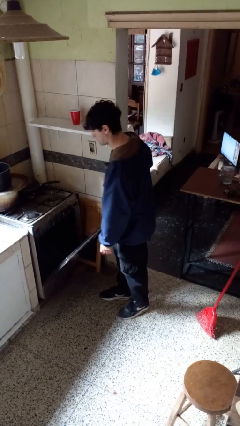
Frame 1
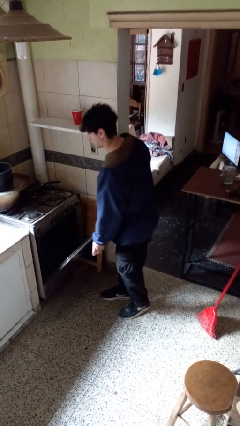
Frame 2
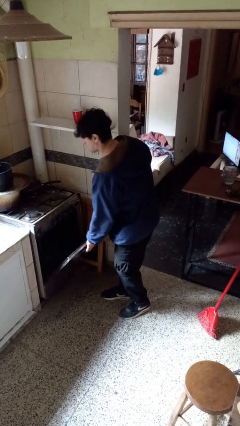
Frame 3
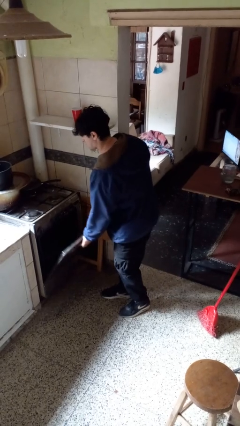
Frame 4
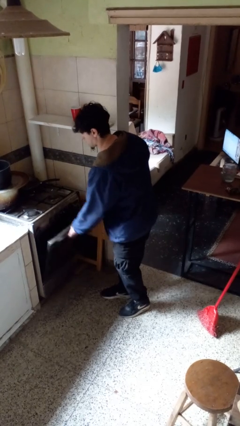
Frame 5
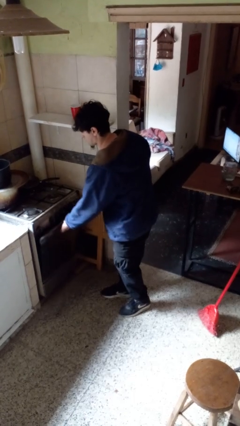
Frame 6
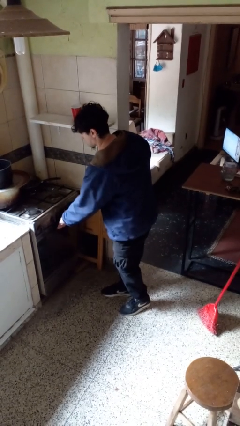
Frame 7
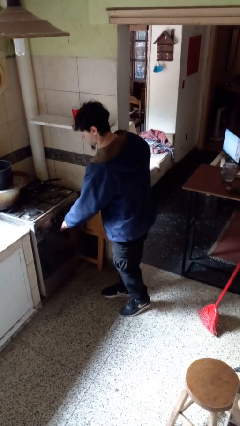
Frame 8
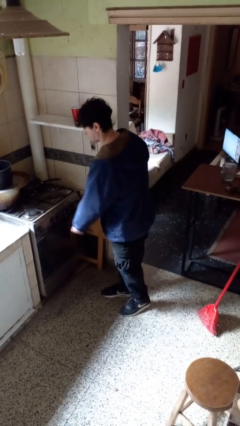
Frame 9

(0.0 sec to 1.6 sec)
person closes oven door

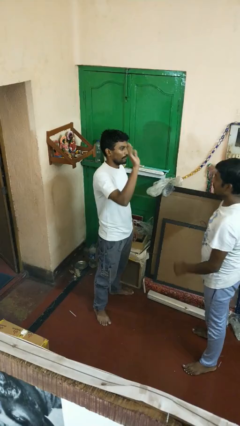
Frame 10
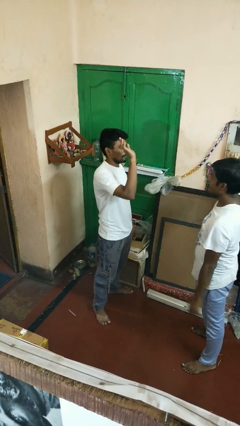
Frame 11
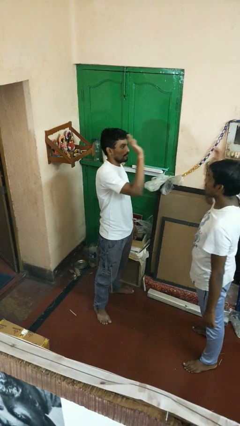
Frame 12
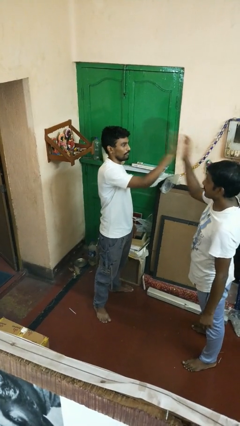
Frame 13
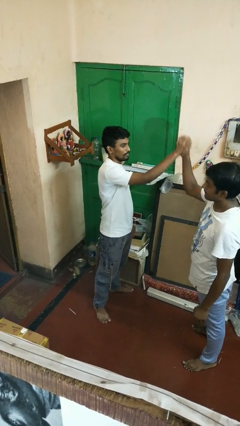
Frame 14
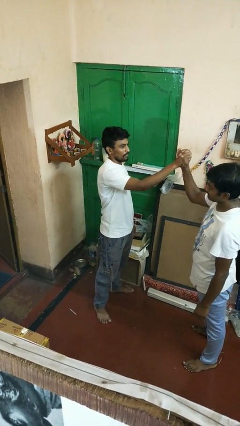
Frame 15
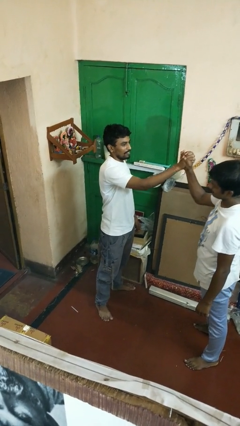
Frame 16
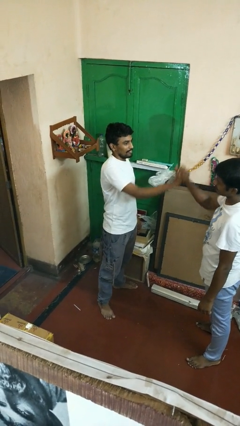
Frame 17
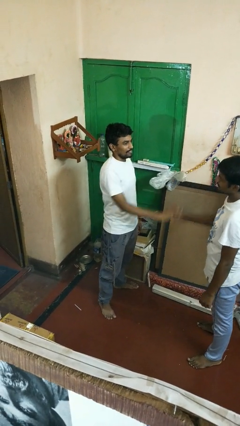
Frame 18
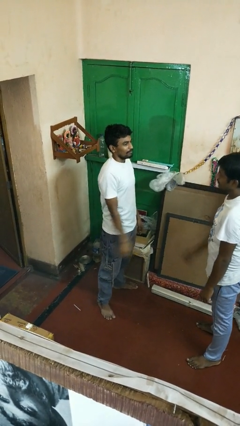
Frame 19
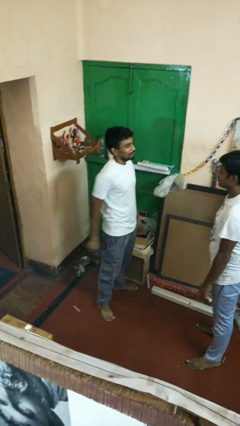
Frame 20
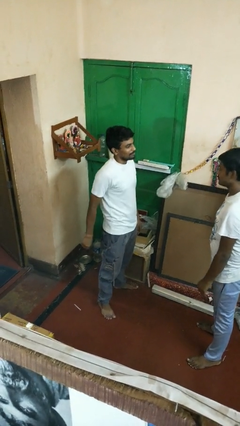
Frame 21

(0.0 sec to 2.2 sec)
person highfives hand

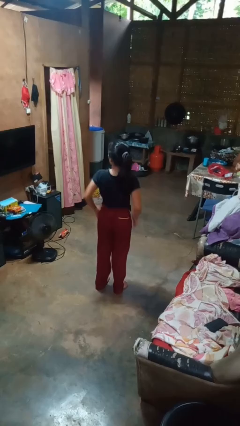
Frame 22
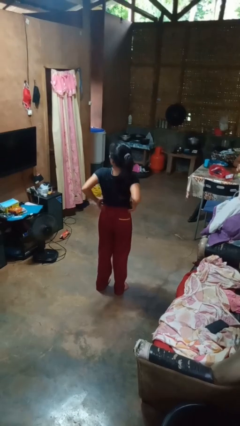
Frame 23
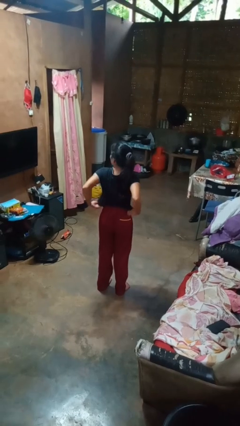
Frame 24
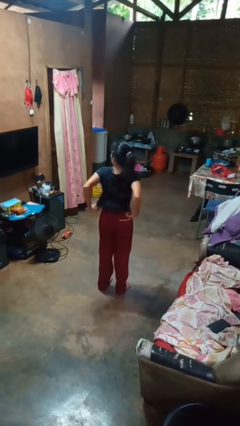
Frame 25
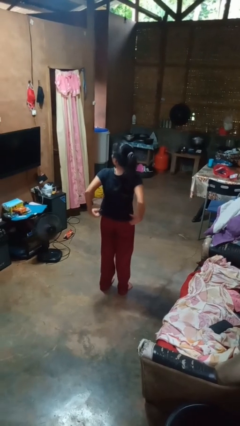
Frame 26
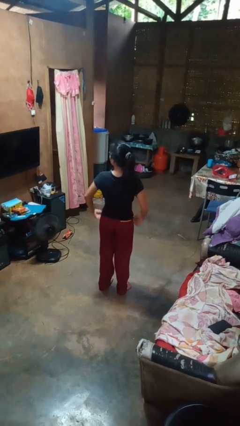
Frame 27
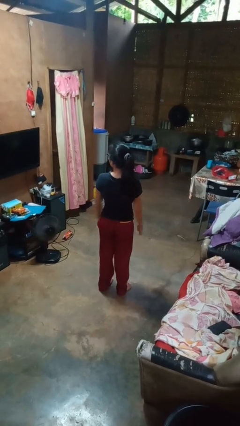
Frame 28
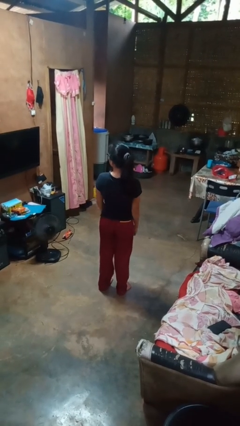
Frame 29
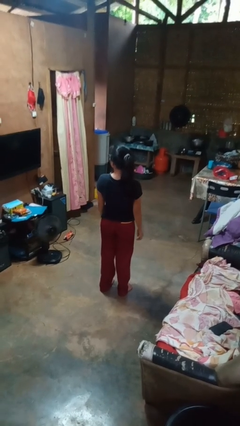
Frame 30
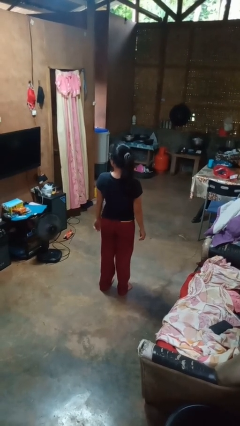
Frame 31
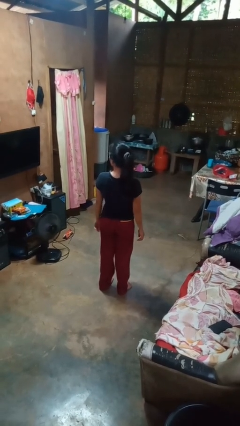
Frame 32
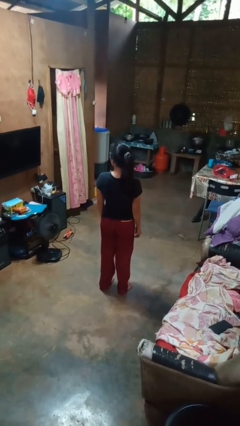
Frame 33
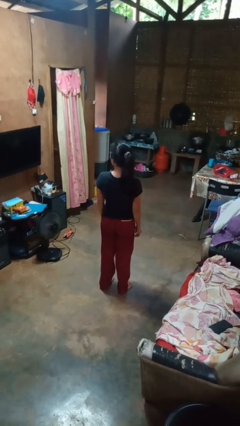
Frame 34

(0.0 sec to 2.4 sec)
person untucks shirt

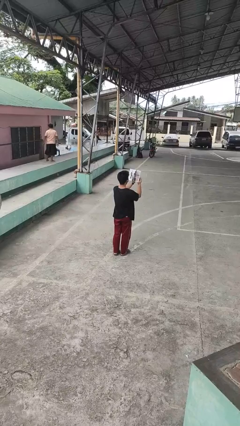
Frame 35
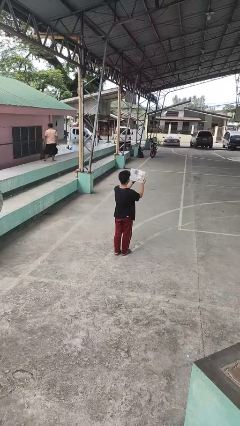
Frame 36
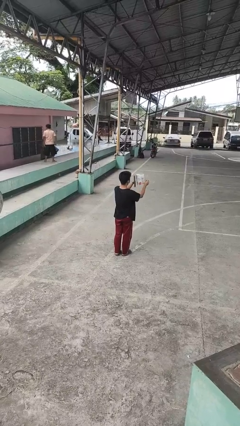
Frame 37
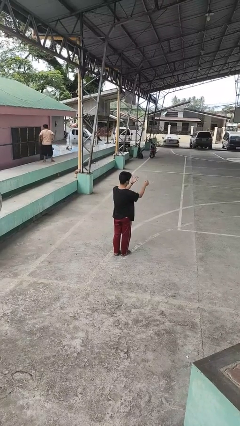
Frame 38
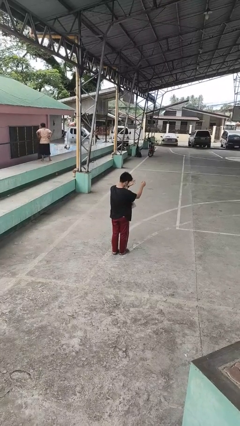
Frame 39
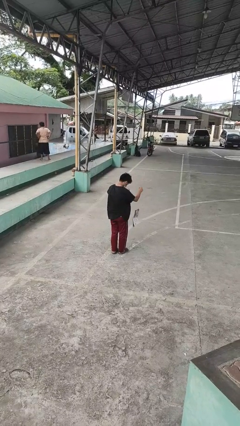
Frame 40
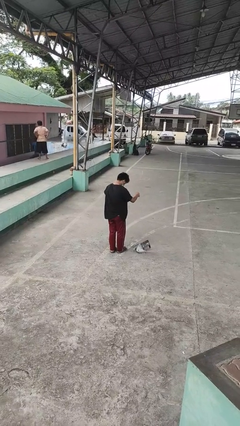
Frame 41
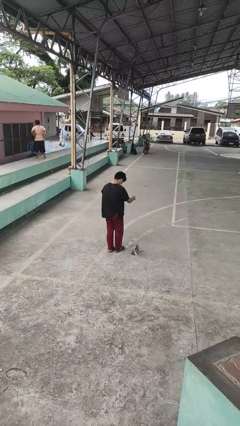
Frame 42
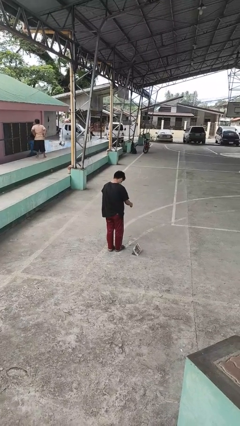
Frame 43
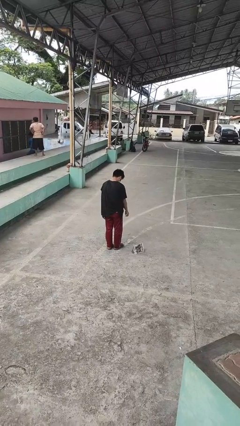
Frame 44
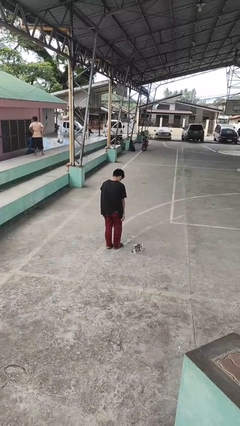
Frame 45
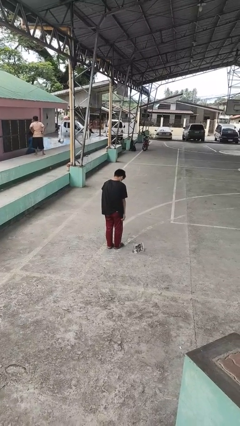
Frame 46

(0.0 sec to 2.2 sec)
person drops object

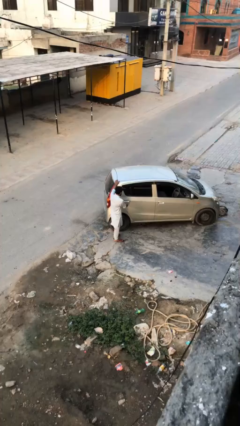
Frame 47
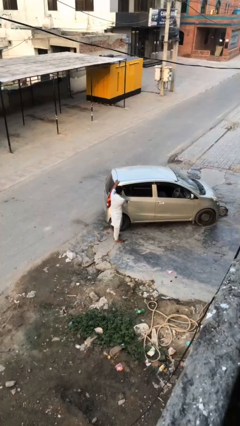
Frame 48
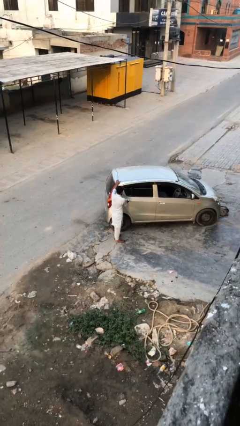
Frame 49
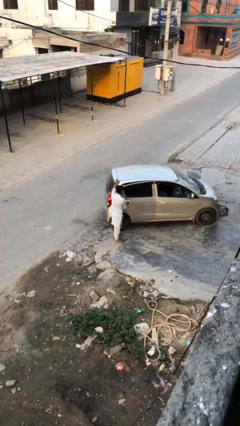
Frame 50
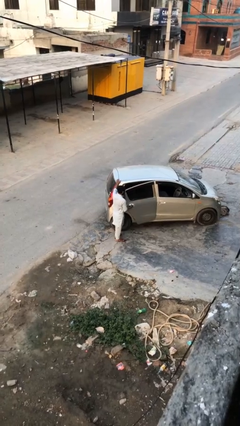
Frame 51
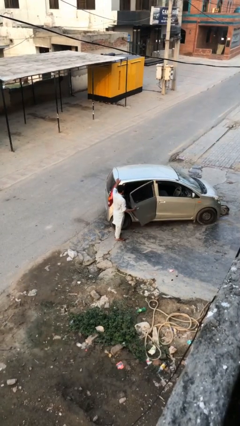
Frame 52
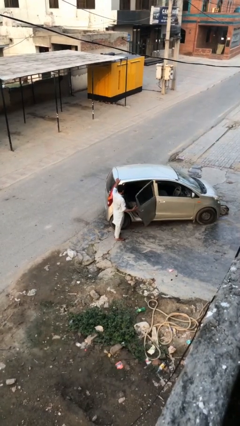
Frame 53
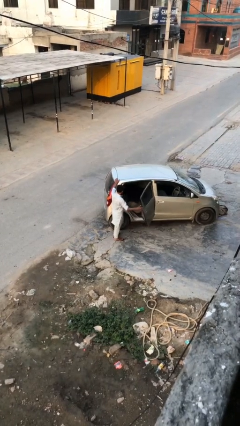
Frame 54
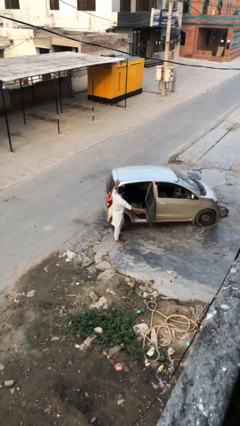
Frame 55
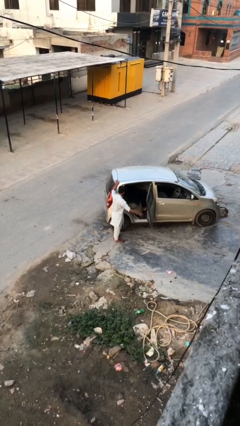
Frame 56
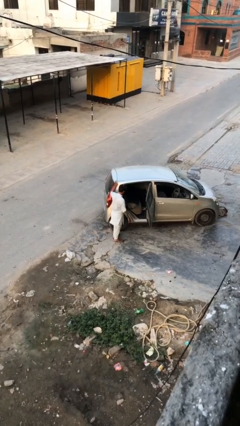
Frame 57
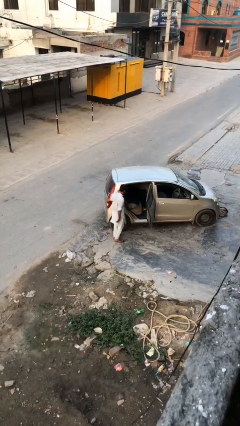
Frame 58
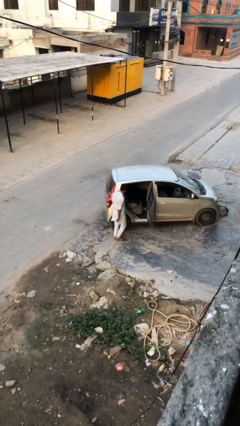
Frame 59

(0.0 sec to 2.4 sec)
person opens car door

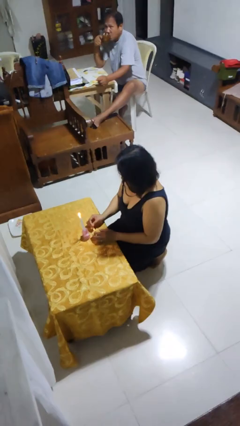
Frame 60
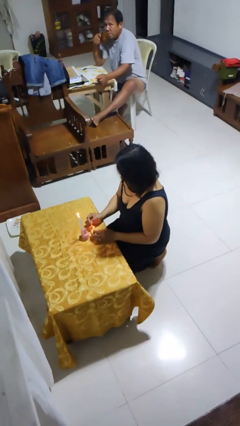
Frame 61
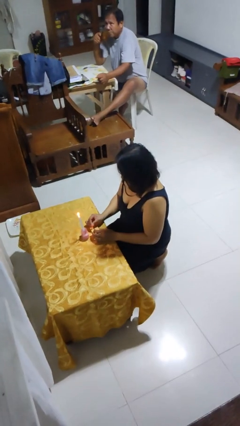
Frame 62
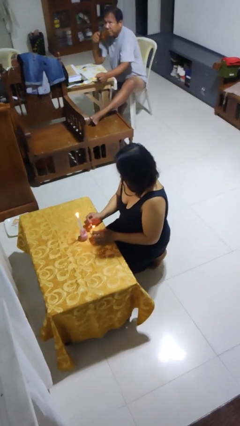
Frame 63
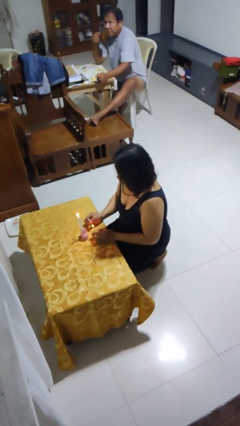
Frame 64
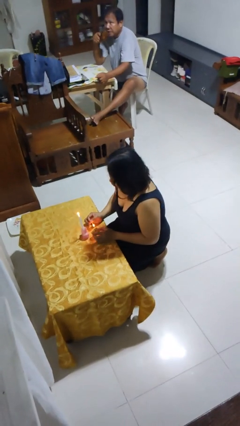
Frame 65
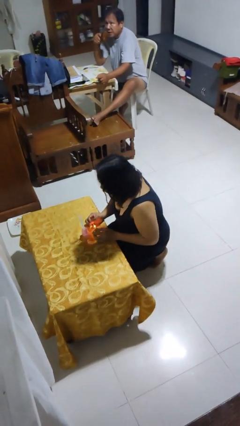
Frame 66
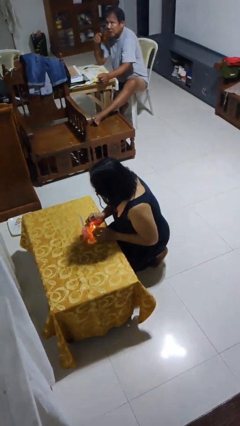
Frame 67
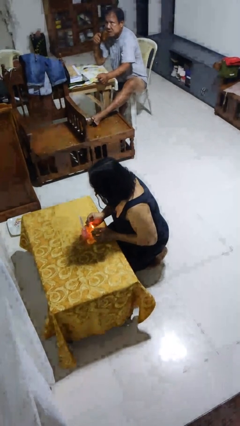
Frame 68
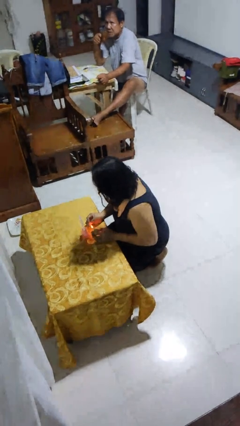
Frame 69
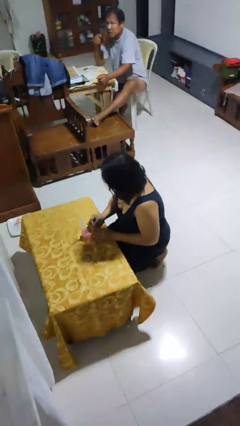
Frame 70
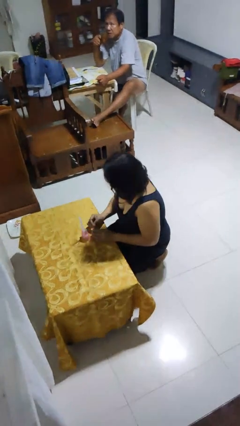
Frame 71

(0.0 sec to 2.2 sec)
person extinguishes candle

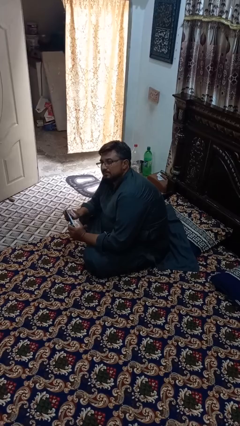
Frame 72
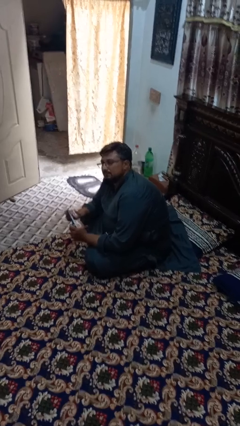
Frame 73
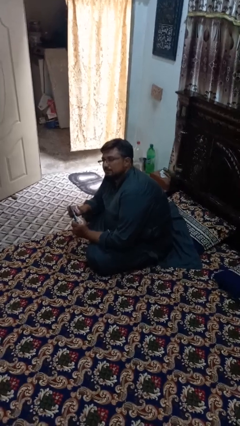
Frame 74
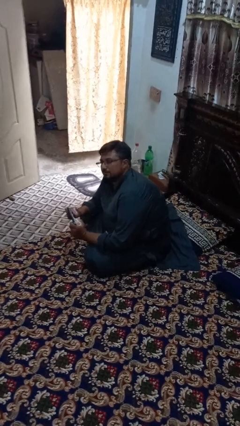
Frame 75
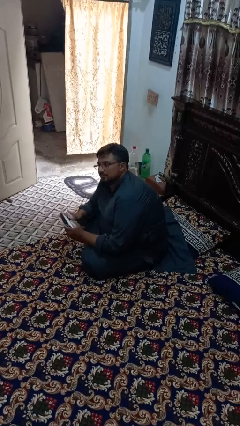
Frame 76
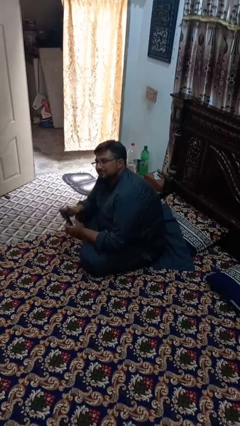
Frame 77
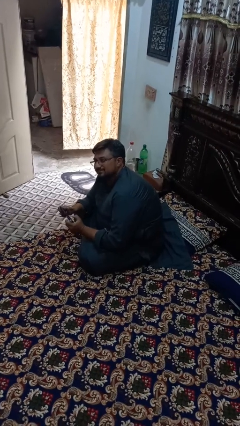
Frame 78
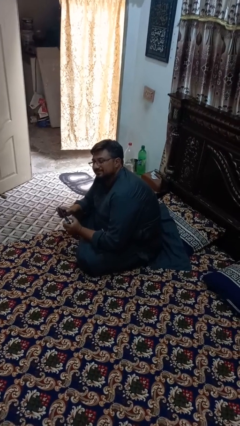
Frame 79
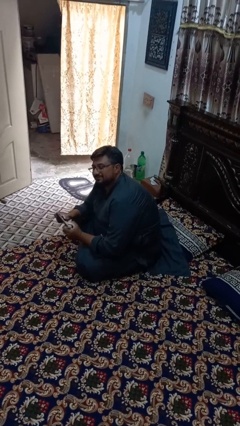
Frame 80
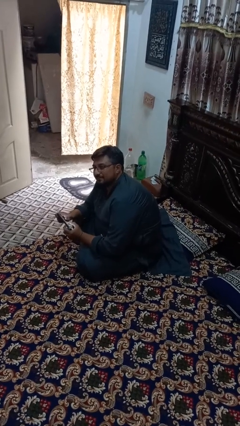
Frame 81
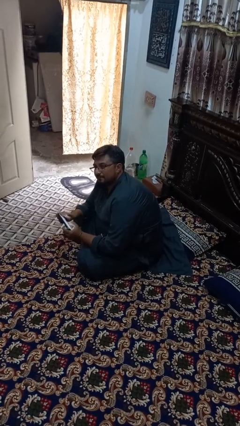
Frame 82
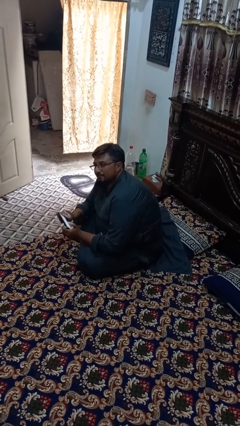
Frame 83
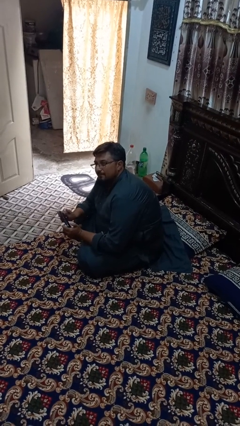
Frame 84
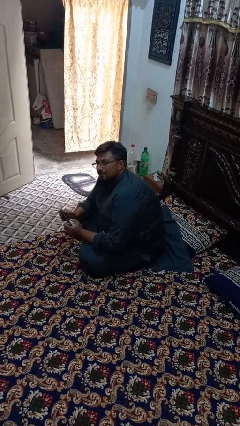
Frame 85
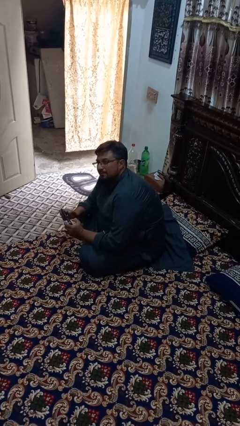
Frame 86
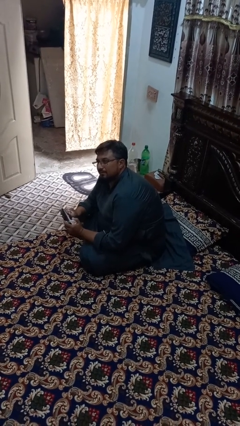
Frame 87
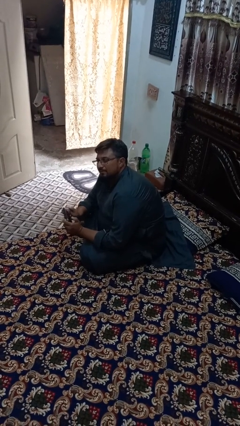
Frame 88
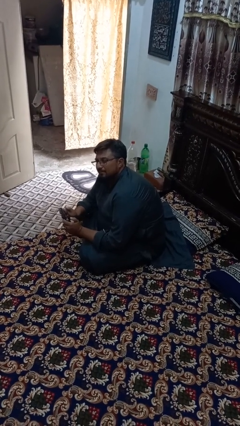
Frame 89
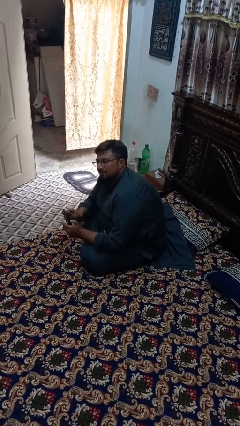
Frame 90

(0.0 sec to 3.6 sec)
person interacts with handheld game

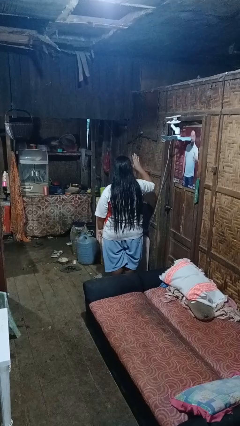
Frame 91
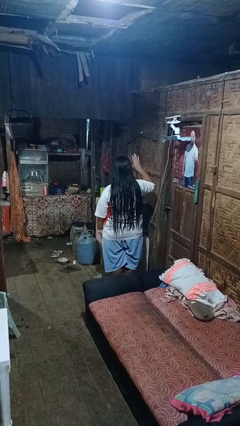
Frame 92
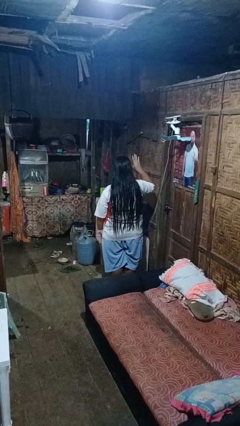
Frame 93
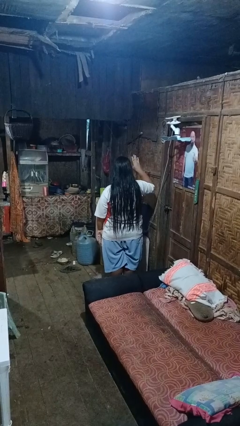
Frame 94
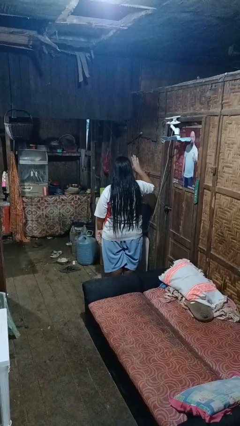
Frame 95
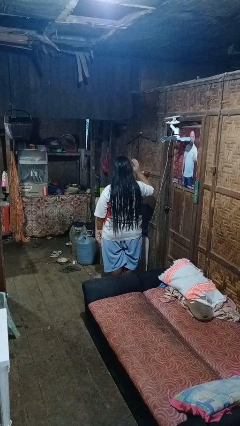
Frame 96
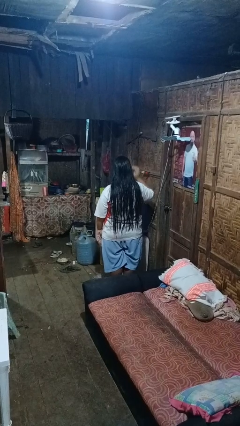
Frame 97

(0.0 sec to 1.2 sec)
person gestures number four
